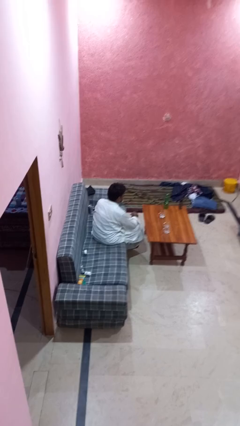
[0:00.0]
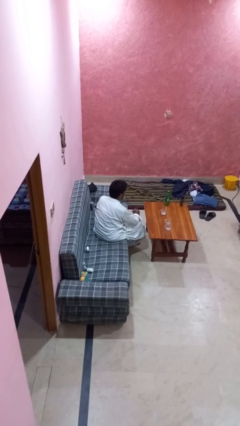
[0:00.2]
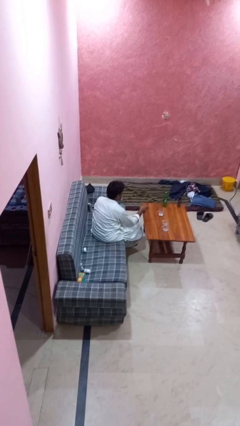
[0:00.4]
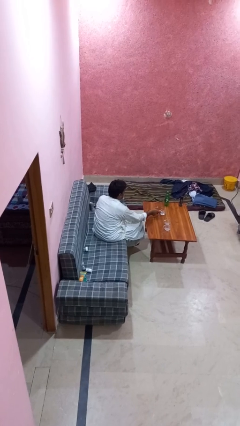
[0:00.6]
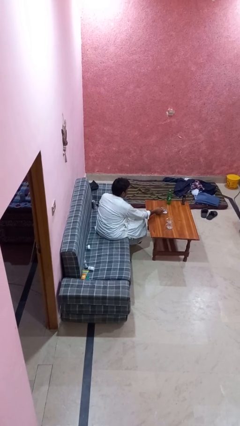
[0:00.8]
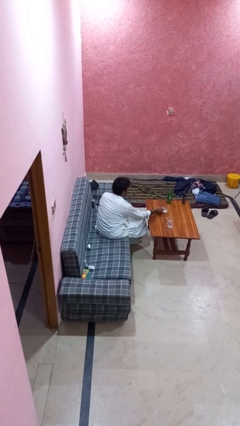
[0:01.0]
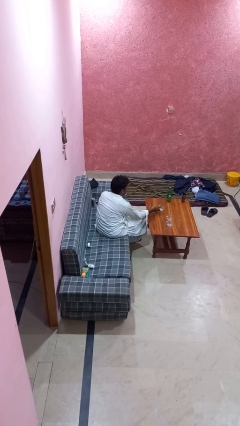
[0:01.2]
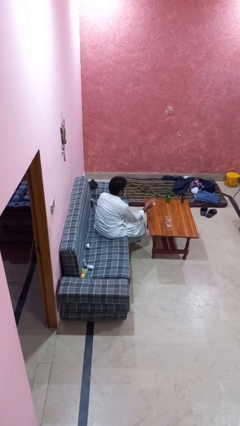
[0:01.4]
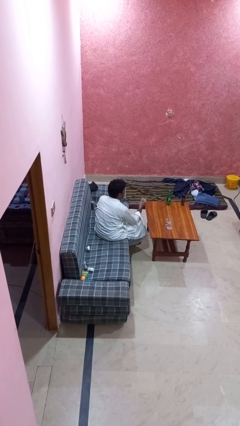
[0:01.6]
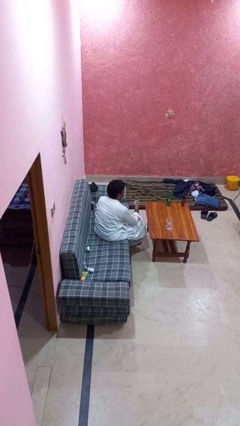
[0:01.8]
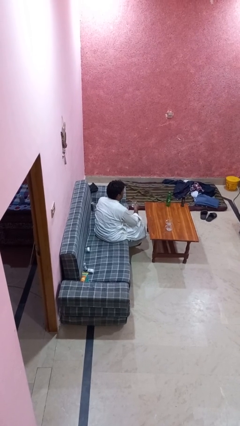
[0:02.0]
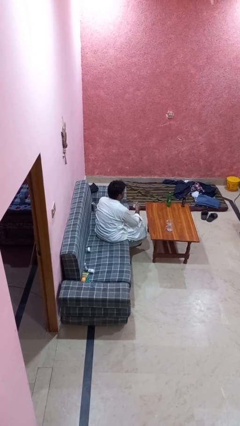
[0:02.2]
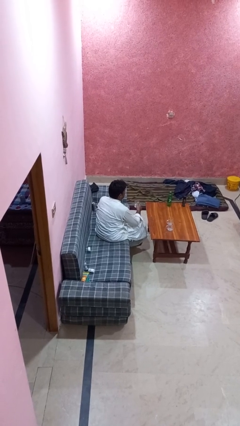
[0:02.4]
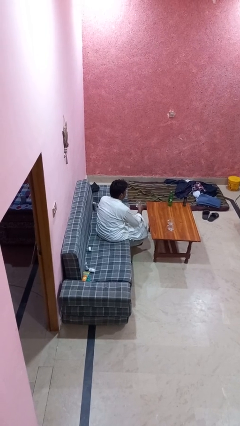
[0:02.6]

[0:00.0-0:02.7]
person picks up object from table

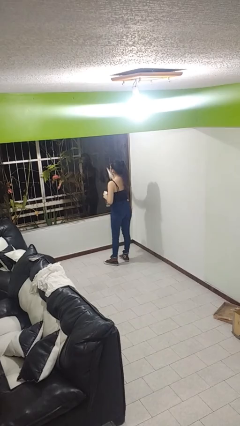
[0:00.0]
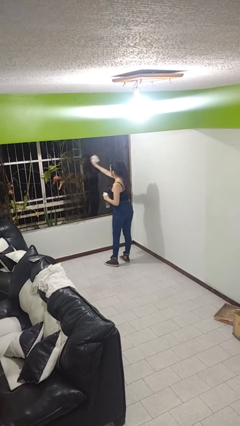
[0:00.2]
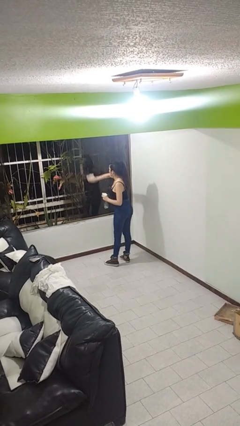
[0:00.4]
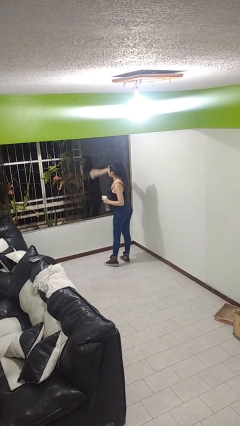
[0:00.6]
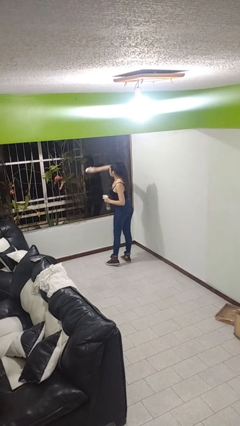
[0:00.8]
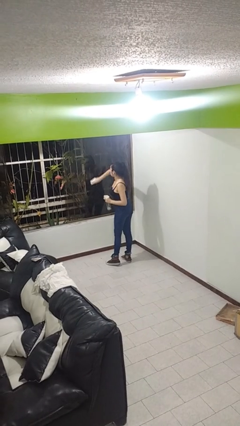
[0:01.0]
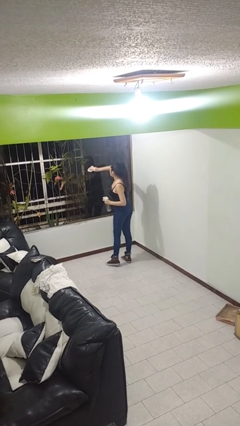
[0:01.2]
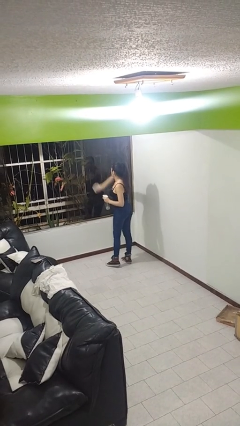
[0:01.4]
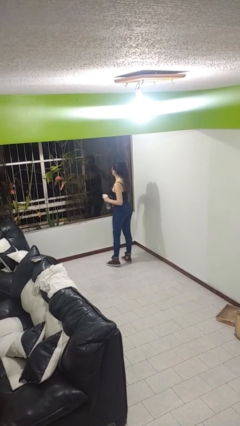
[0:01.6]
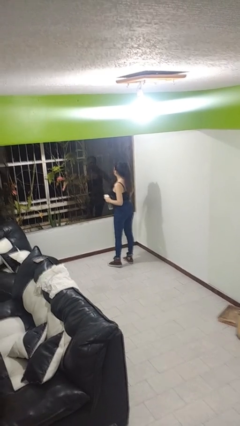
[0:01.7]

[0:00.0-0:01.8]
person washes window

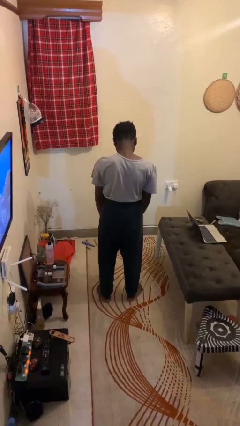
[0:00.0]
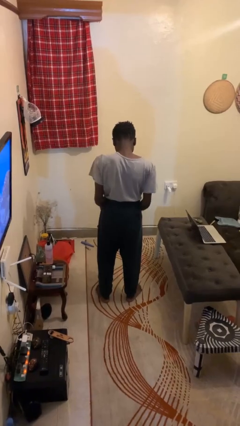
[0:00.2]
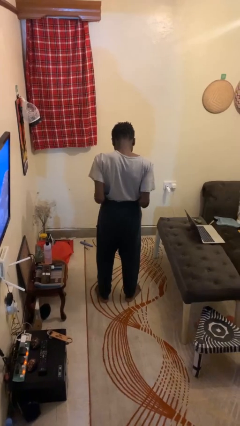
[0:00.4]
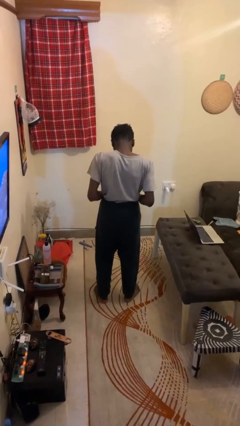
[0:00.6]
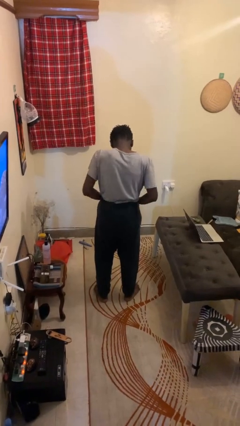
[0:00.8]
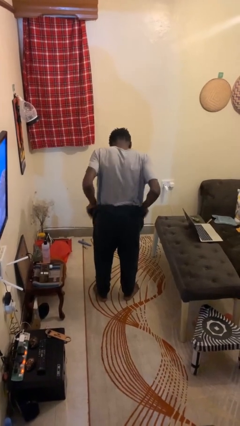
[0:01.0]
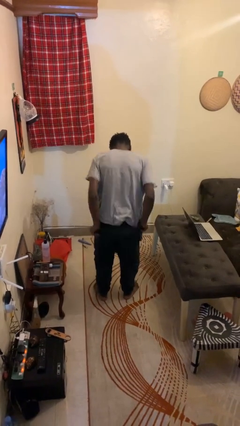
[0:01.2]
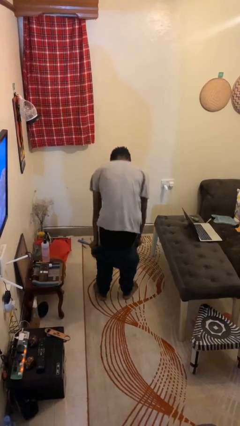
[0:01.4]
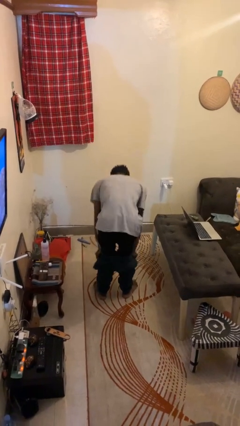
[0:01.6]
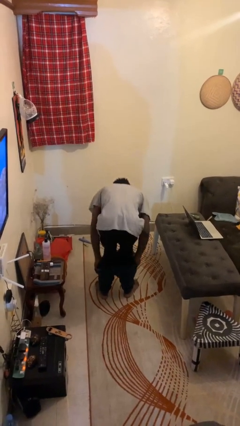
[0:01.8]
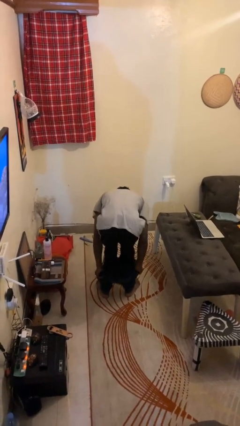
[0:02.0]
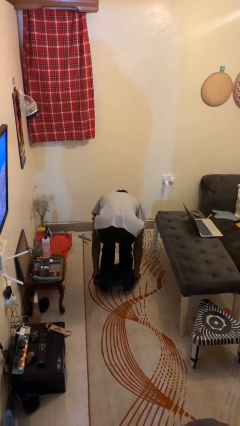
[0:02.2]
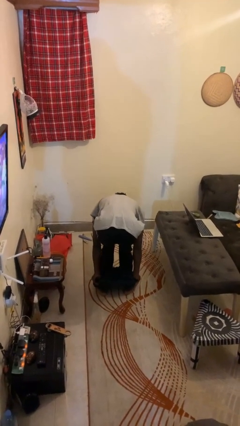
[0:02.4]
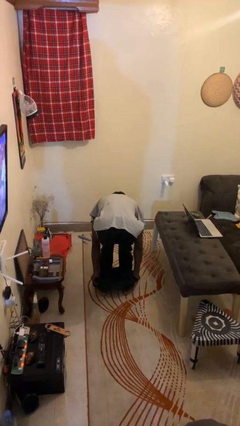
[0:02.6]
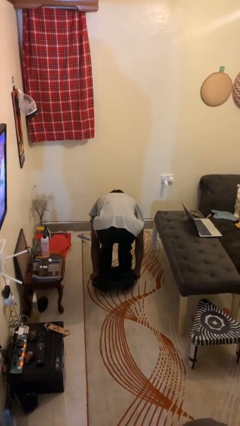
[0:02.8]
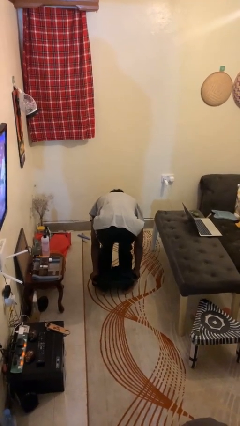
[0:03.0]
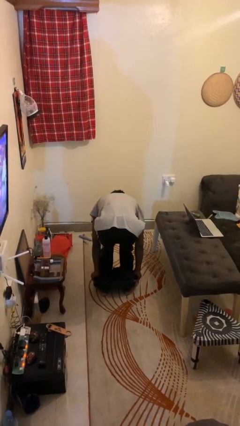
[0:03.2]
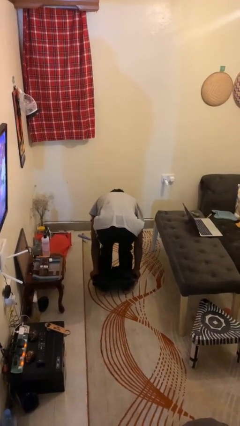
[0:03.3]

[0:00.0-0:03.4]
person takes off pants

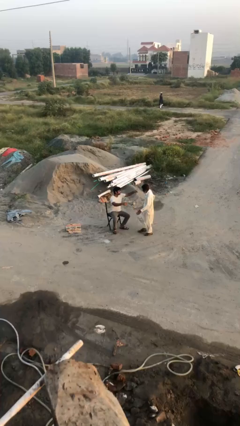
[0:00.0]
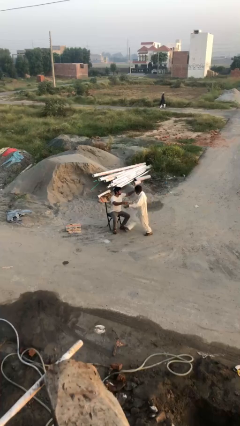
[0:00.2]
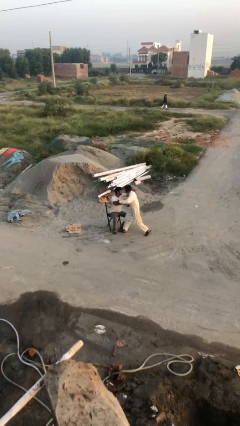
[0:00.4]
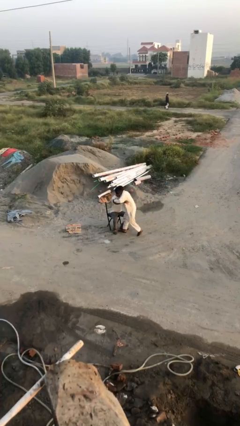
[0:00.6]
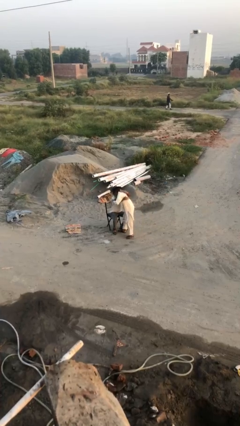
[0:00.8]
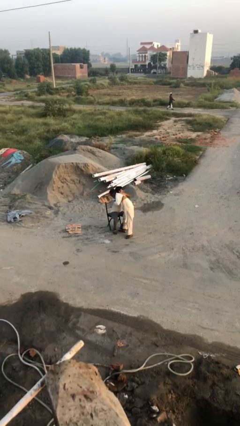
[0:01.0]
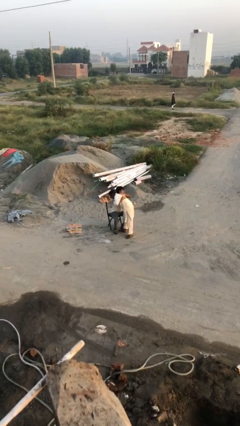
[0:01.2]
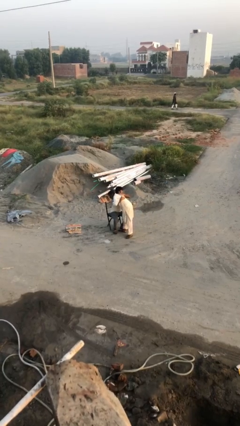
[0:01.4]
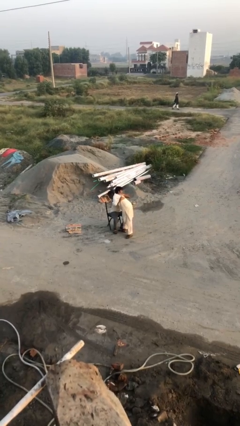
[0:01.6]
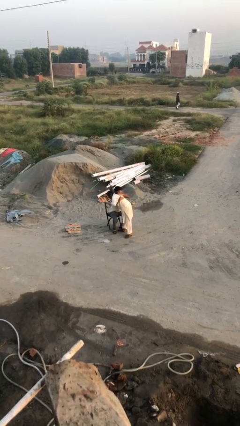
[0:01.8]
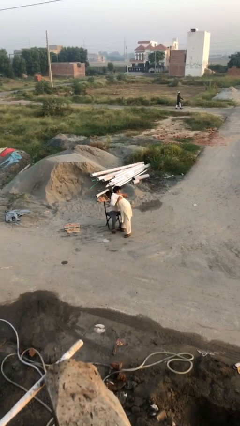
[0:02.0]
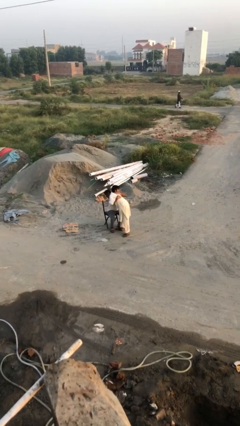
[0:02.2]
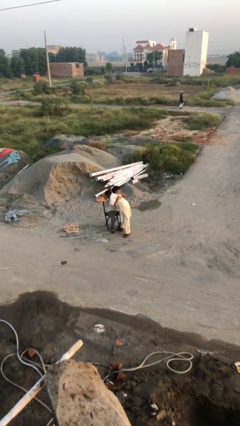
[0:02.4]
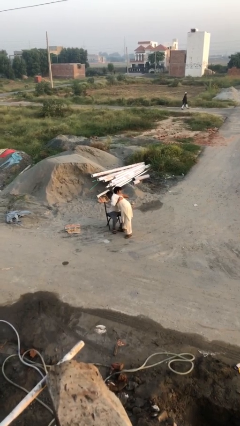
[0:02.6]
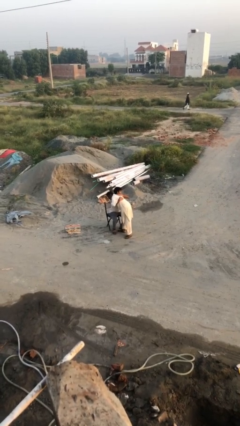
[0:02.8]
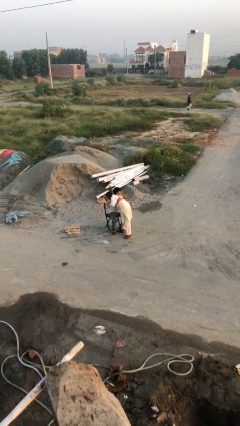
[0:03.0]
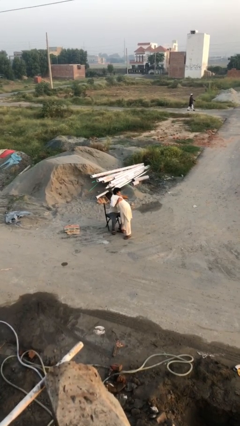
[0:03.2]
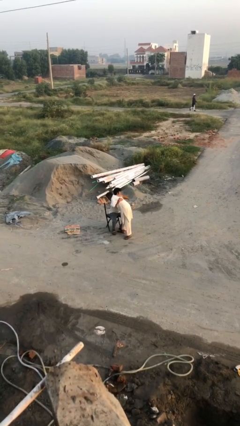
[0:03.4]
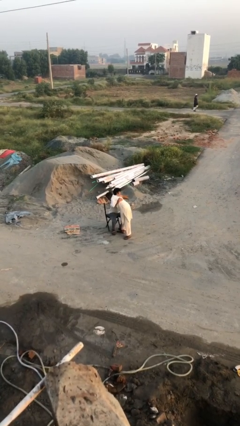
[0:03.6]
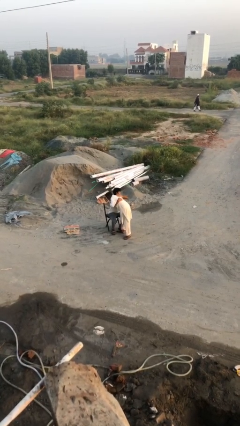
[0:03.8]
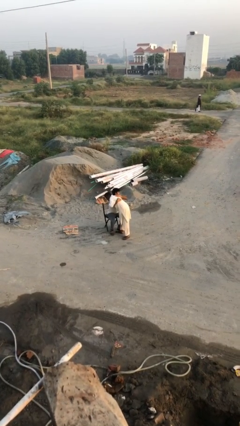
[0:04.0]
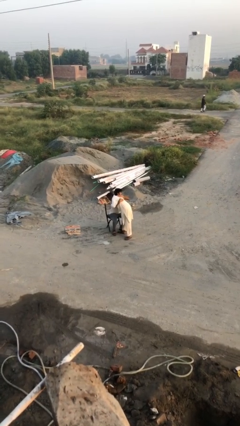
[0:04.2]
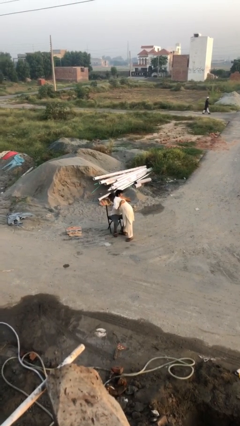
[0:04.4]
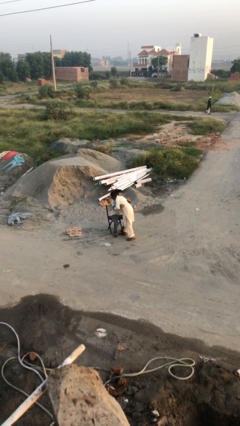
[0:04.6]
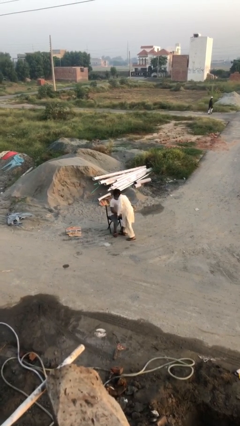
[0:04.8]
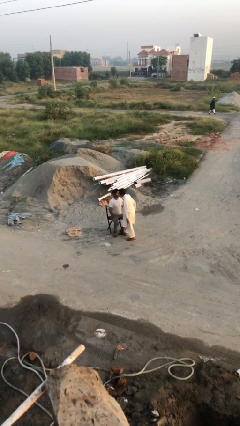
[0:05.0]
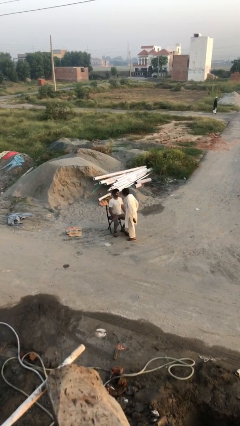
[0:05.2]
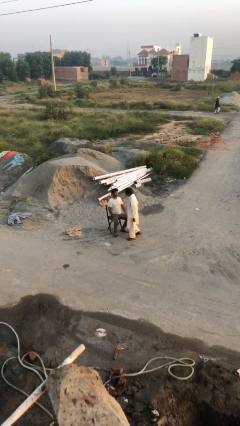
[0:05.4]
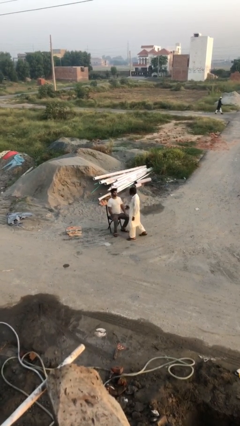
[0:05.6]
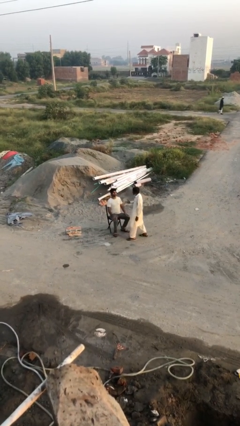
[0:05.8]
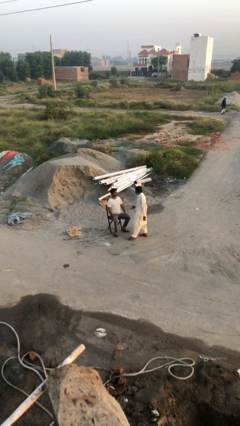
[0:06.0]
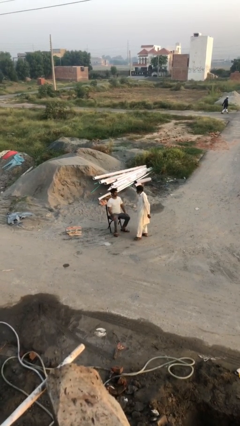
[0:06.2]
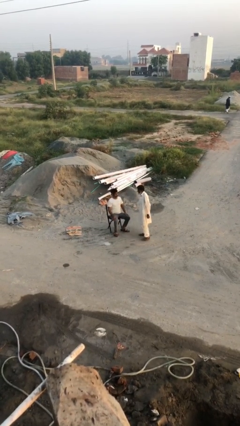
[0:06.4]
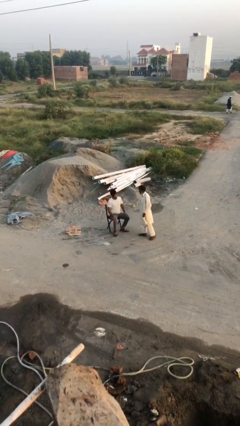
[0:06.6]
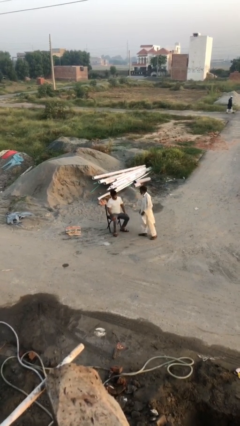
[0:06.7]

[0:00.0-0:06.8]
person embraces person

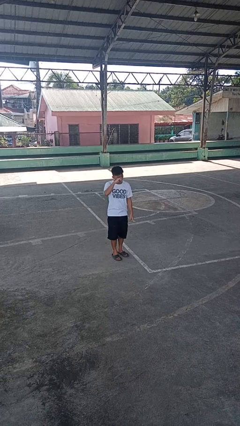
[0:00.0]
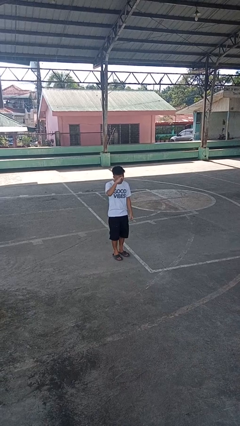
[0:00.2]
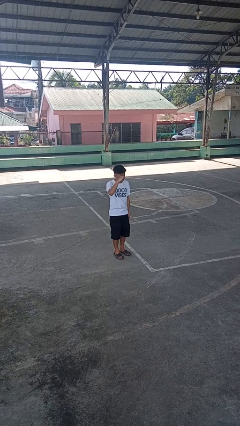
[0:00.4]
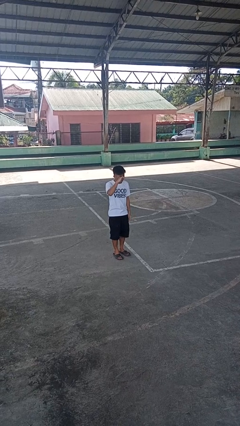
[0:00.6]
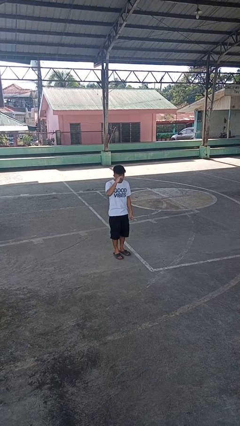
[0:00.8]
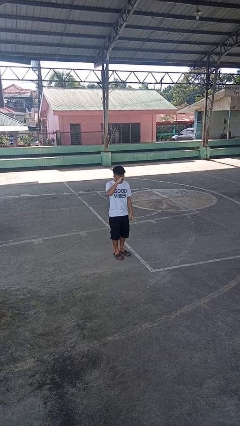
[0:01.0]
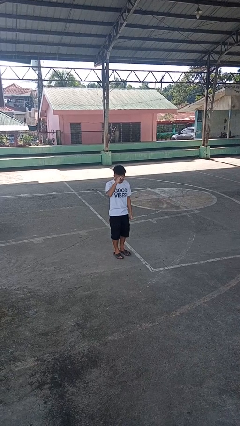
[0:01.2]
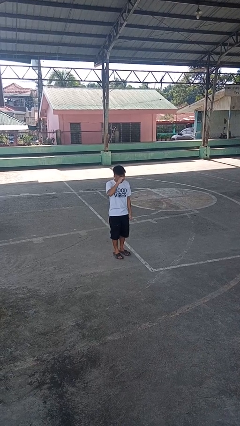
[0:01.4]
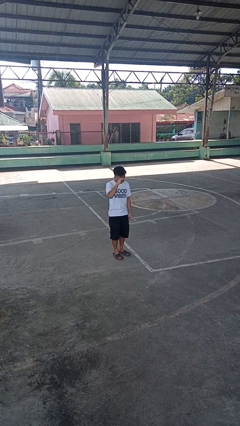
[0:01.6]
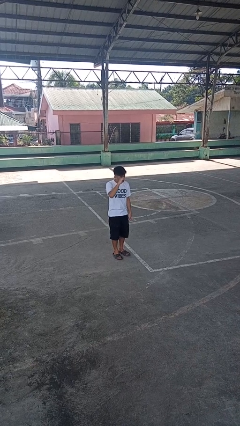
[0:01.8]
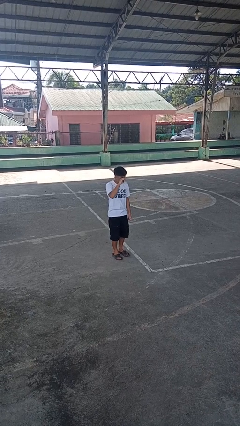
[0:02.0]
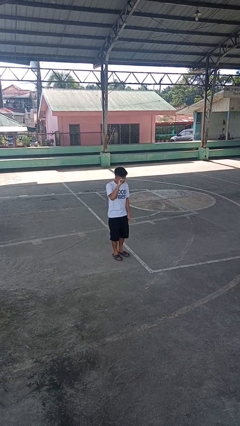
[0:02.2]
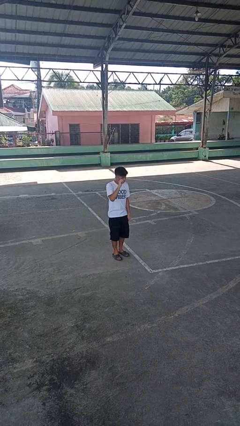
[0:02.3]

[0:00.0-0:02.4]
person rubs eyes

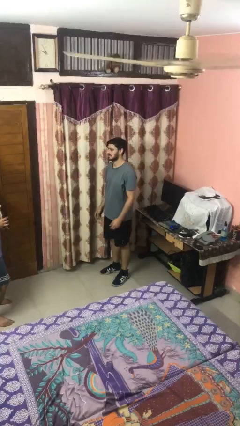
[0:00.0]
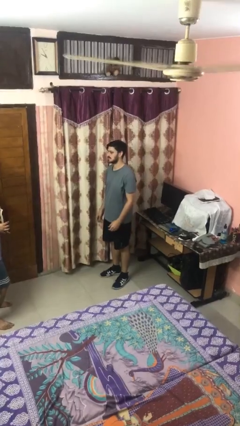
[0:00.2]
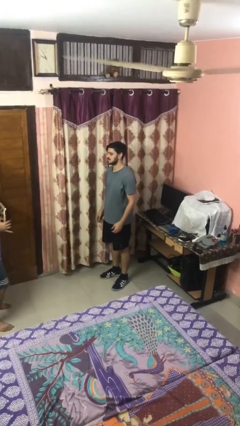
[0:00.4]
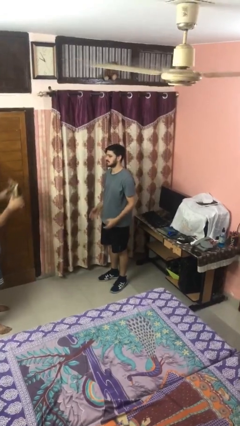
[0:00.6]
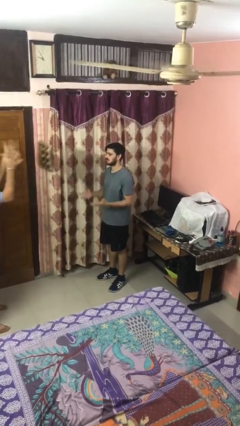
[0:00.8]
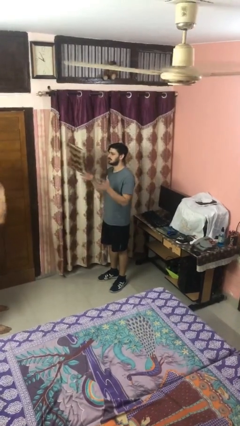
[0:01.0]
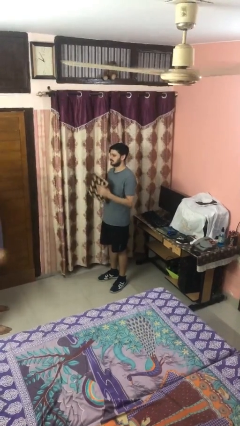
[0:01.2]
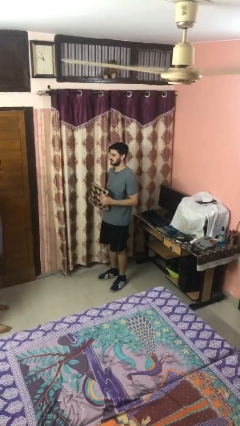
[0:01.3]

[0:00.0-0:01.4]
person catches object from person
